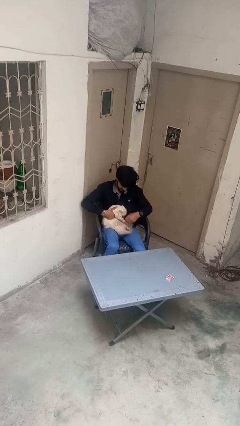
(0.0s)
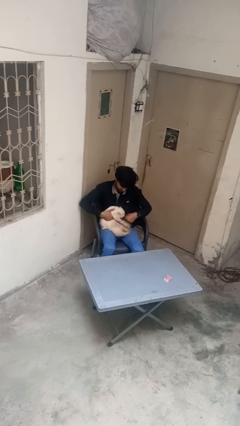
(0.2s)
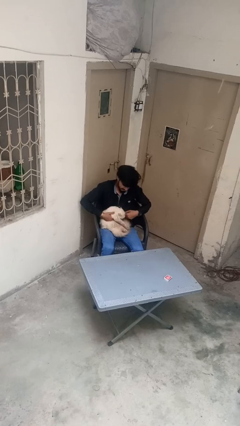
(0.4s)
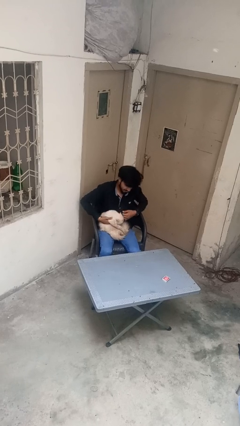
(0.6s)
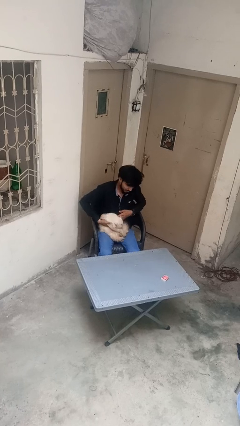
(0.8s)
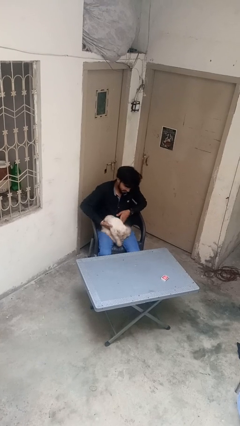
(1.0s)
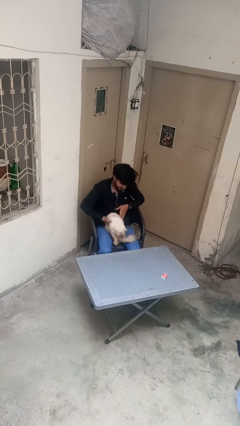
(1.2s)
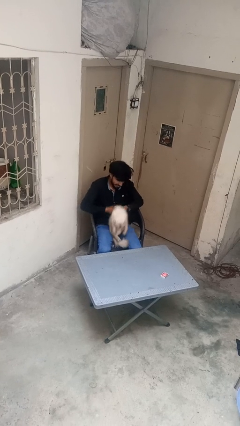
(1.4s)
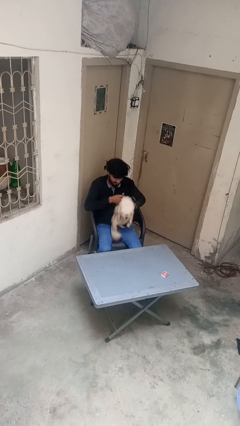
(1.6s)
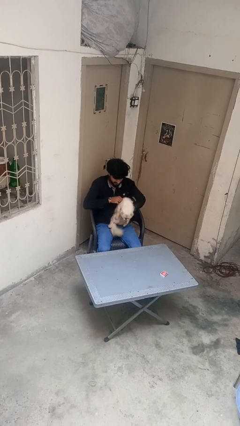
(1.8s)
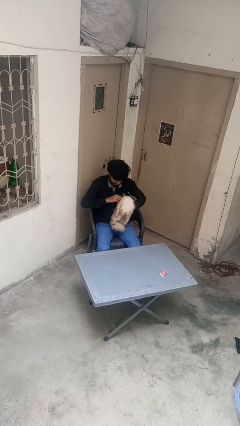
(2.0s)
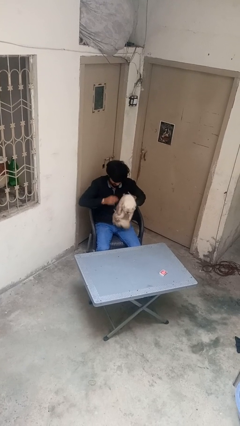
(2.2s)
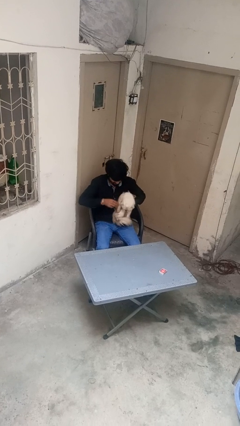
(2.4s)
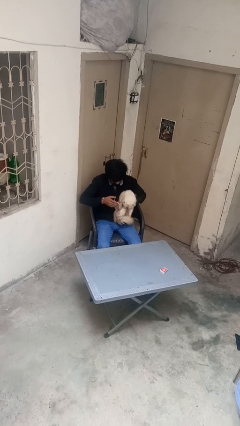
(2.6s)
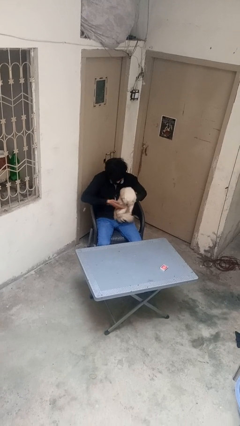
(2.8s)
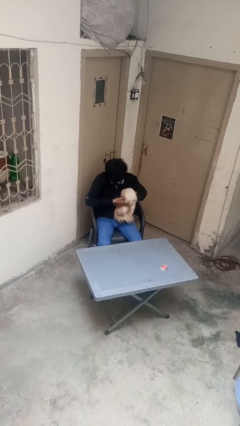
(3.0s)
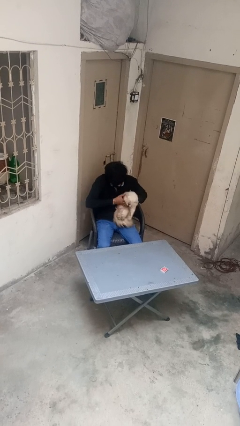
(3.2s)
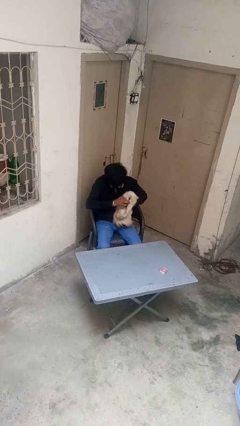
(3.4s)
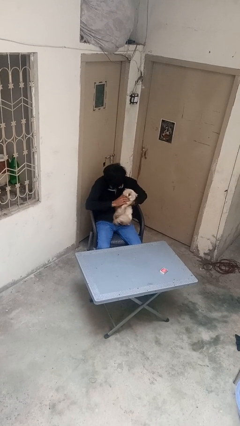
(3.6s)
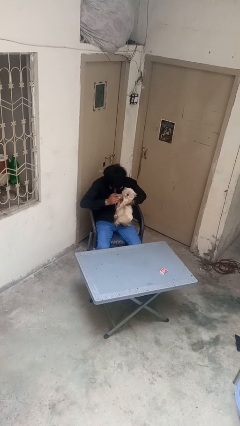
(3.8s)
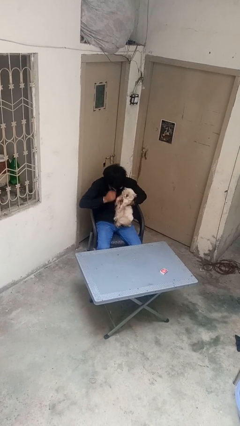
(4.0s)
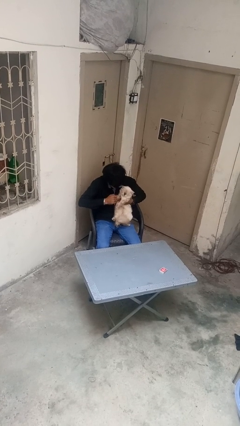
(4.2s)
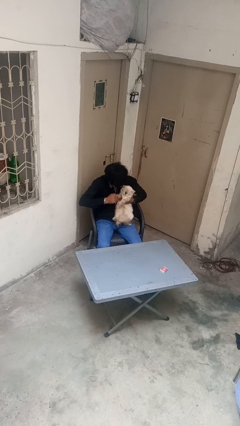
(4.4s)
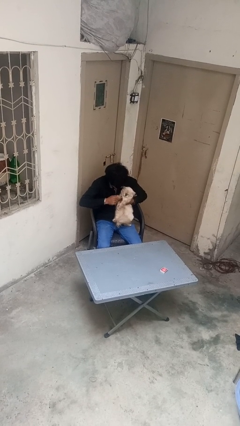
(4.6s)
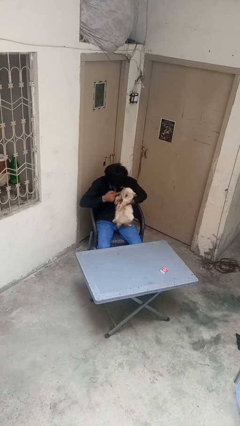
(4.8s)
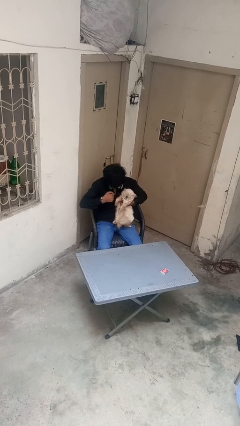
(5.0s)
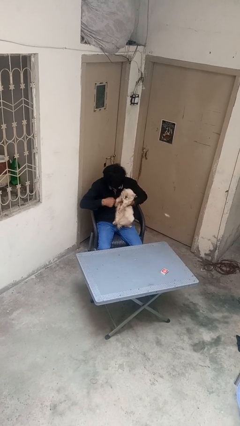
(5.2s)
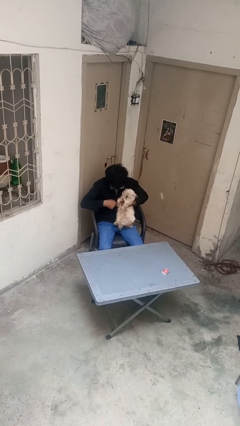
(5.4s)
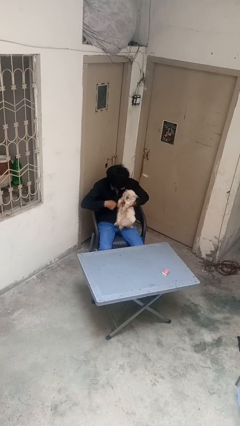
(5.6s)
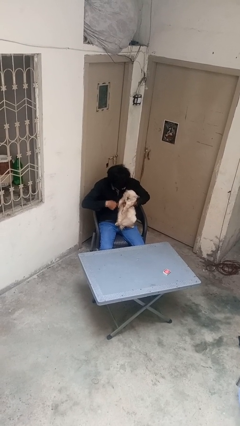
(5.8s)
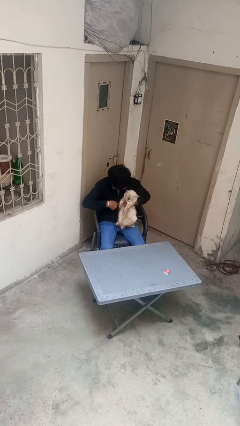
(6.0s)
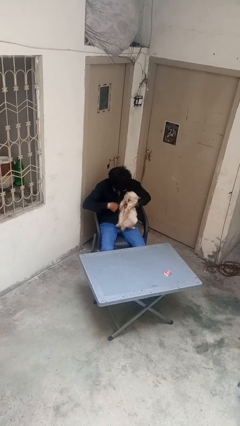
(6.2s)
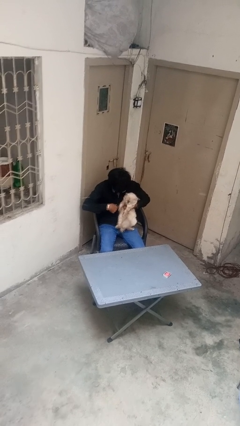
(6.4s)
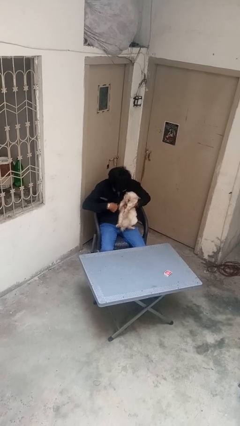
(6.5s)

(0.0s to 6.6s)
person pets cat

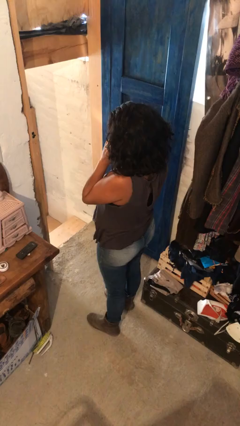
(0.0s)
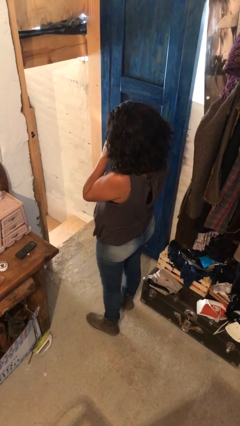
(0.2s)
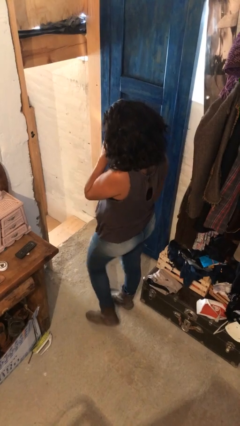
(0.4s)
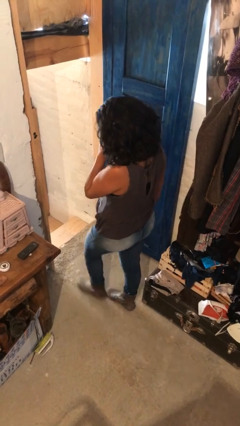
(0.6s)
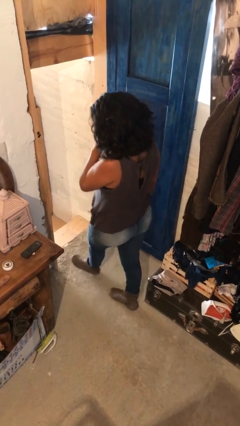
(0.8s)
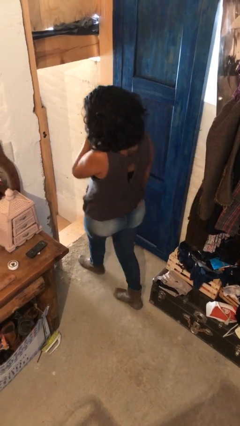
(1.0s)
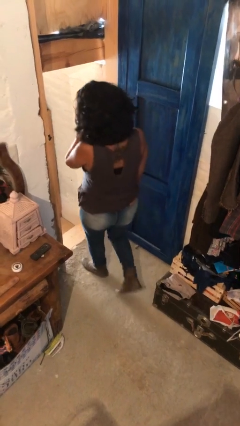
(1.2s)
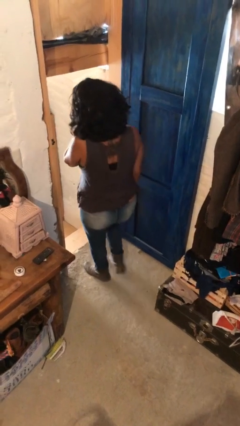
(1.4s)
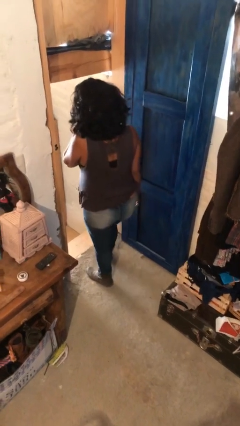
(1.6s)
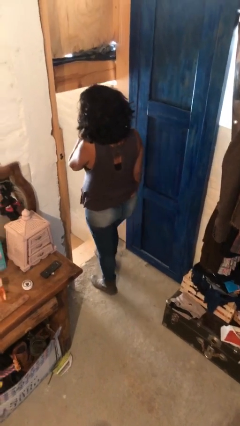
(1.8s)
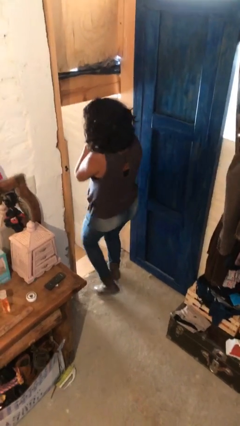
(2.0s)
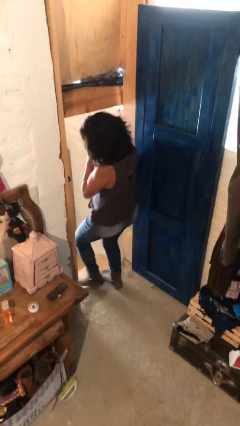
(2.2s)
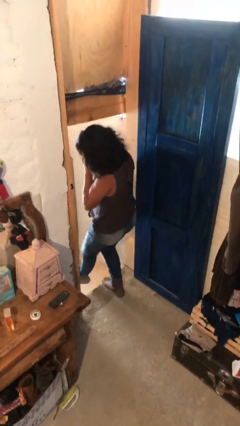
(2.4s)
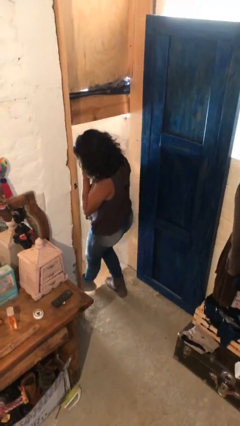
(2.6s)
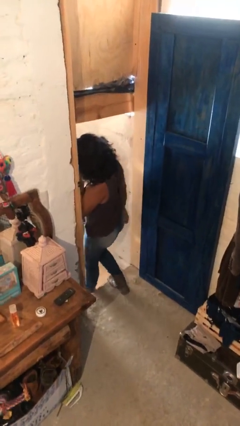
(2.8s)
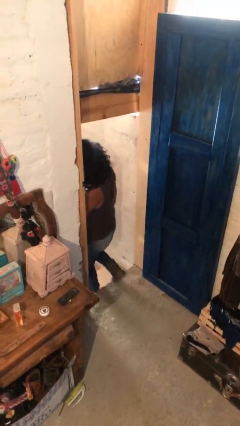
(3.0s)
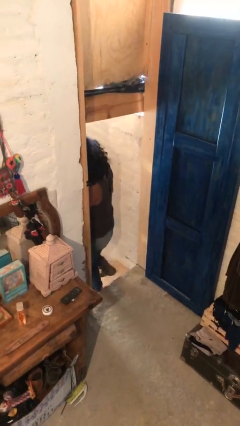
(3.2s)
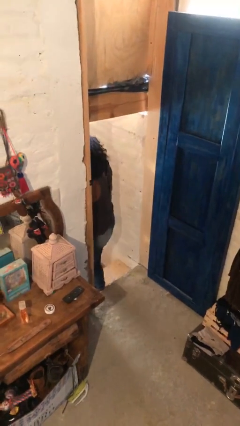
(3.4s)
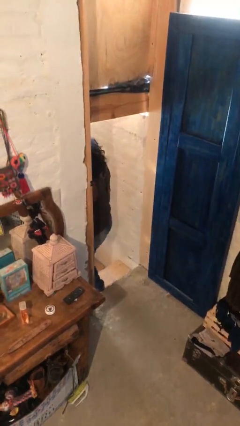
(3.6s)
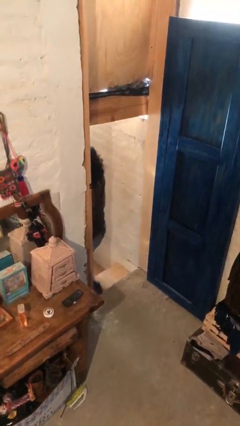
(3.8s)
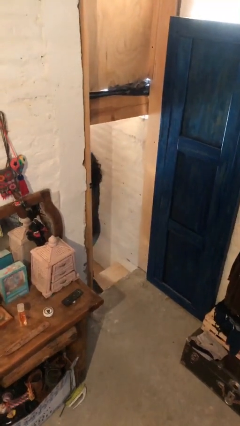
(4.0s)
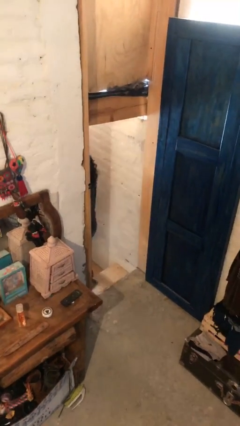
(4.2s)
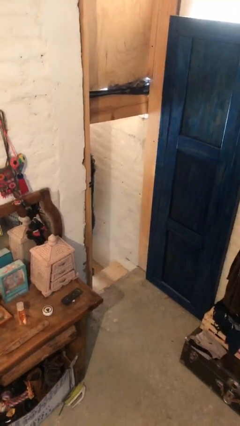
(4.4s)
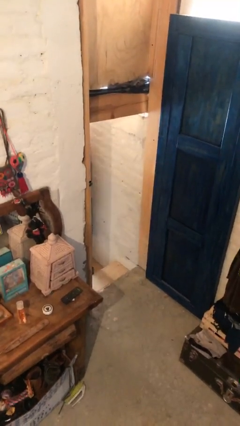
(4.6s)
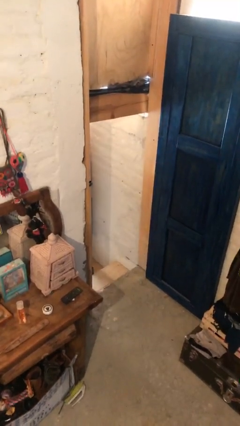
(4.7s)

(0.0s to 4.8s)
person exits scene through structure

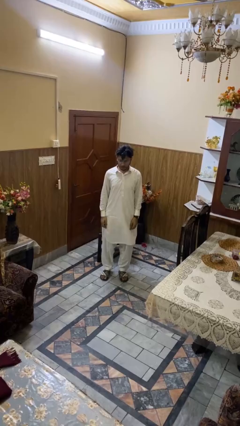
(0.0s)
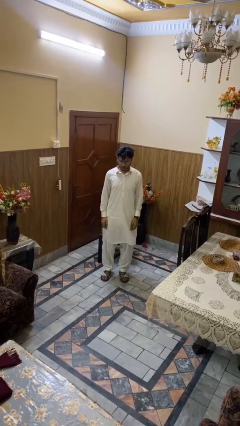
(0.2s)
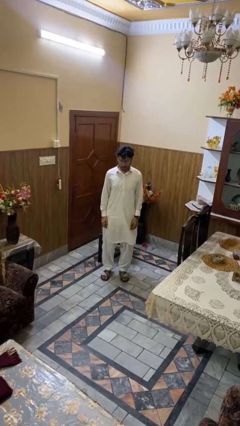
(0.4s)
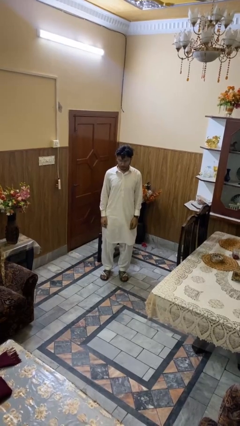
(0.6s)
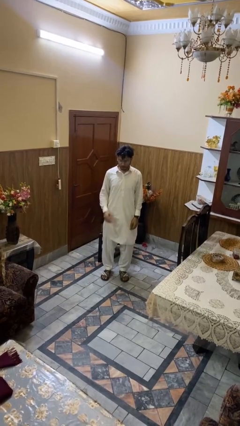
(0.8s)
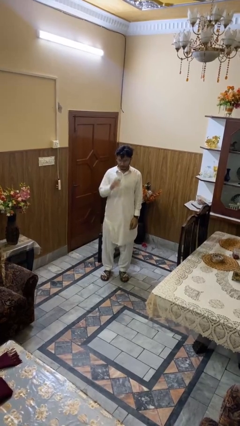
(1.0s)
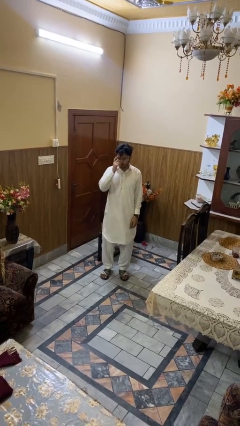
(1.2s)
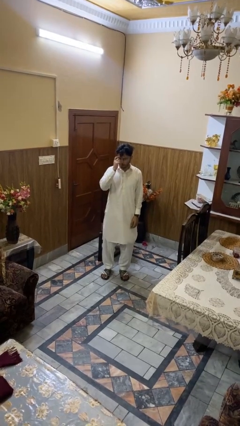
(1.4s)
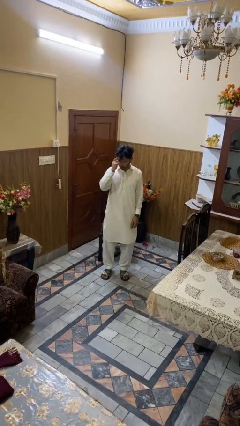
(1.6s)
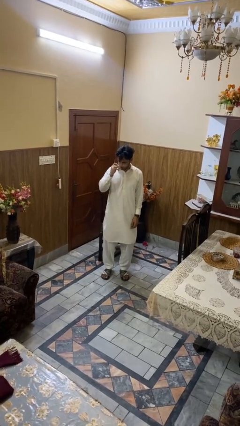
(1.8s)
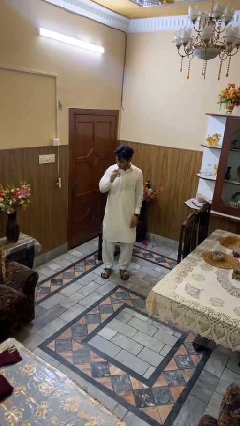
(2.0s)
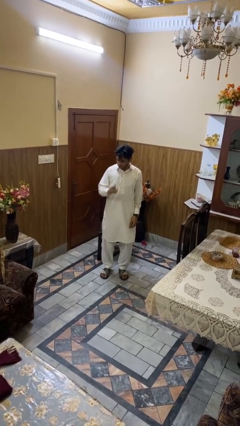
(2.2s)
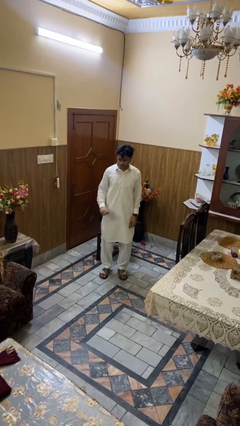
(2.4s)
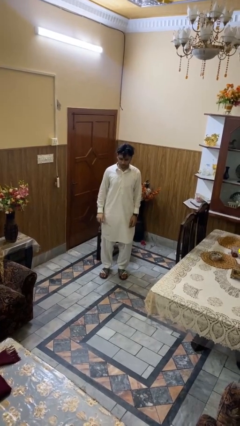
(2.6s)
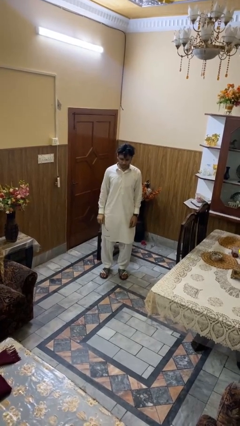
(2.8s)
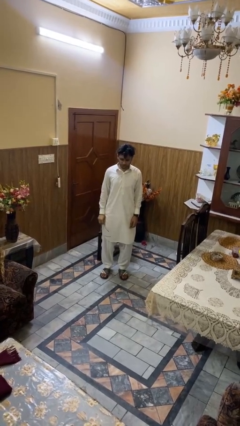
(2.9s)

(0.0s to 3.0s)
person takes off glasses

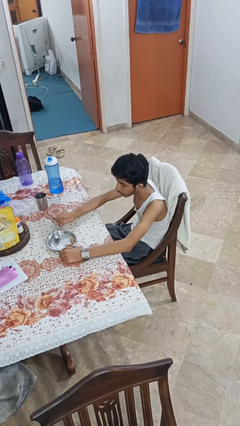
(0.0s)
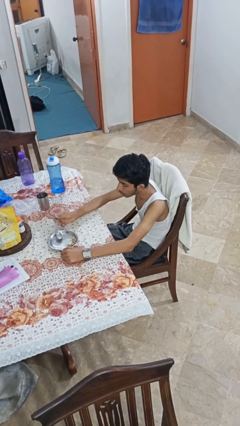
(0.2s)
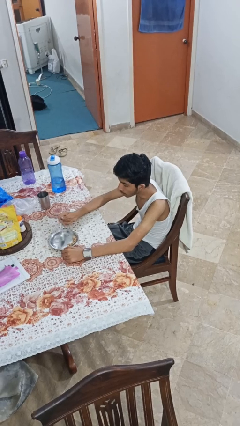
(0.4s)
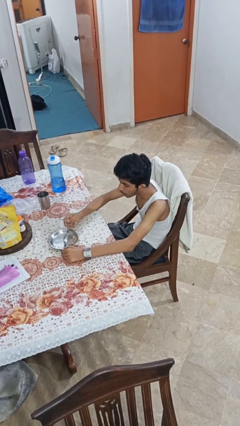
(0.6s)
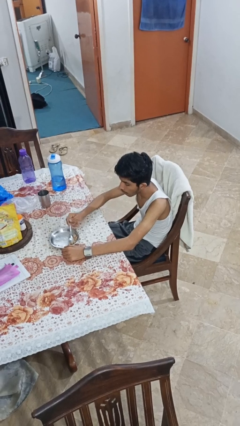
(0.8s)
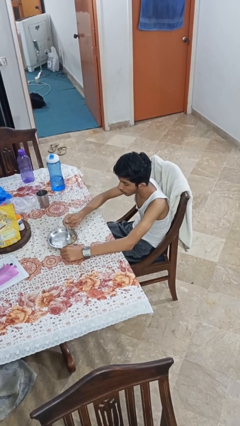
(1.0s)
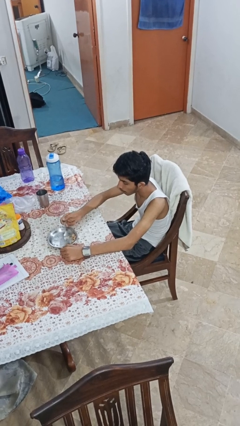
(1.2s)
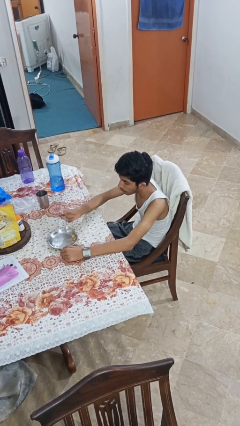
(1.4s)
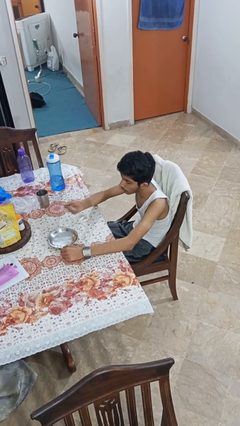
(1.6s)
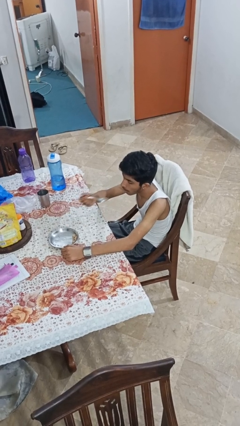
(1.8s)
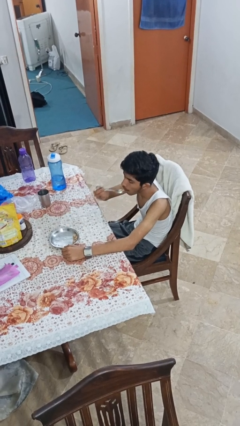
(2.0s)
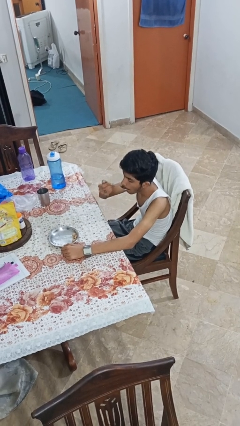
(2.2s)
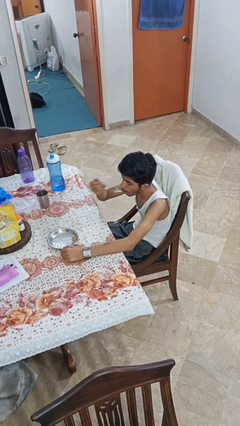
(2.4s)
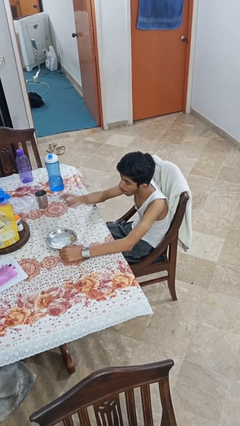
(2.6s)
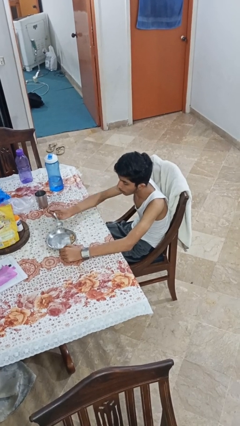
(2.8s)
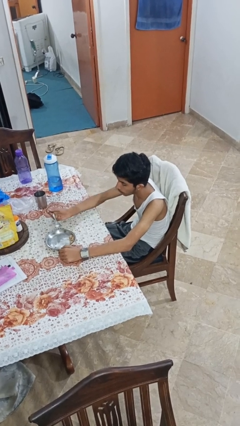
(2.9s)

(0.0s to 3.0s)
person eats with utensil

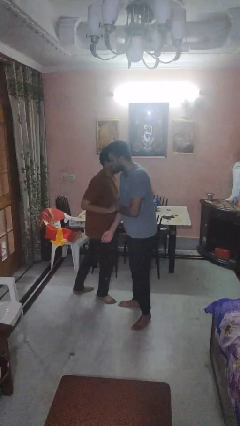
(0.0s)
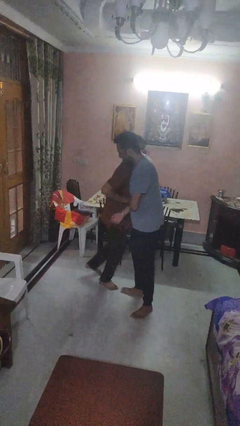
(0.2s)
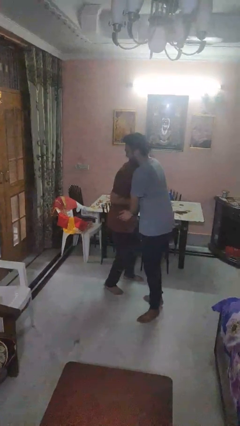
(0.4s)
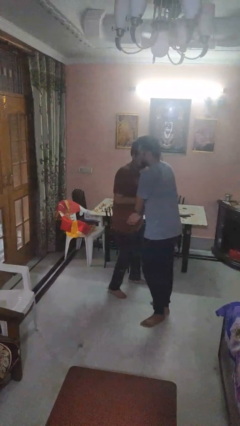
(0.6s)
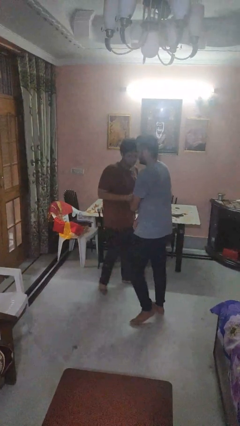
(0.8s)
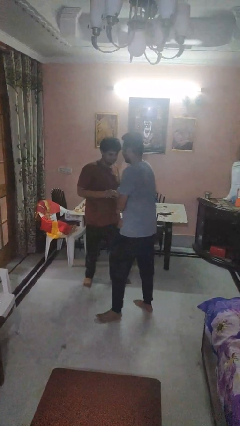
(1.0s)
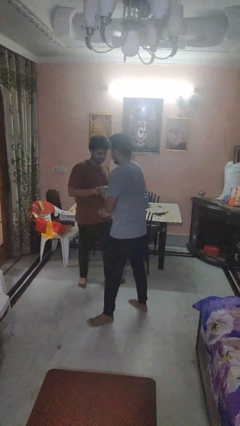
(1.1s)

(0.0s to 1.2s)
person bumps into person
